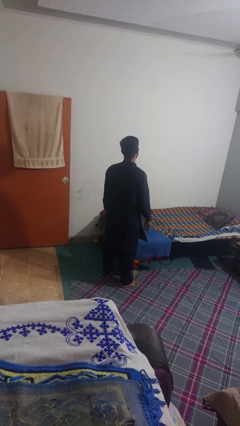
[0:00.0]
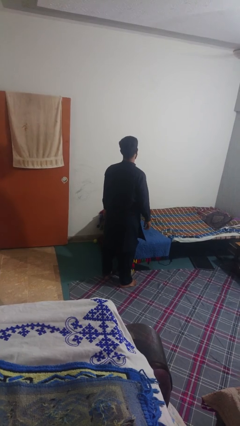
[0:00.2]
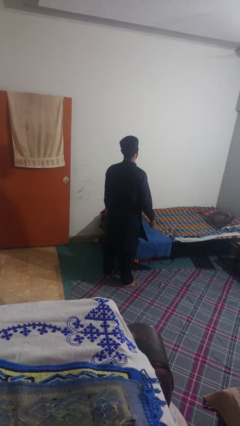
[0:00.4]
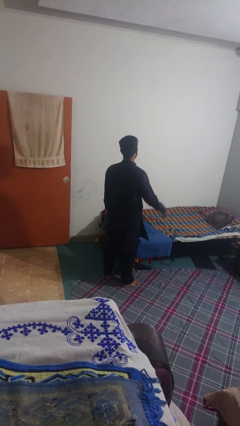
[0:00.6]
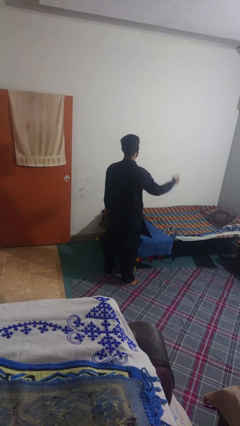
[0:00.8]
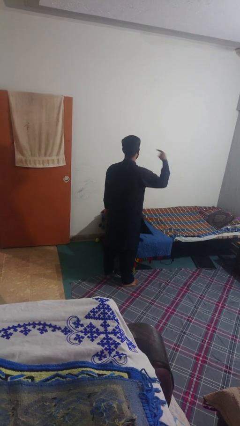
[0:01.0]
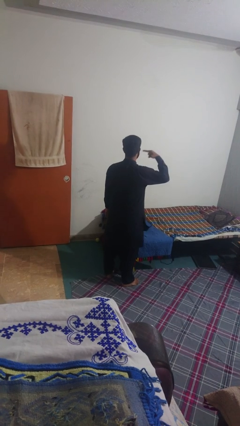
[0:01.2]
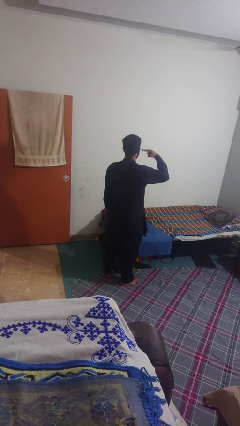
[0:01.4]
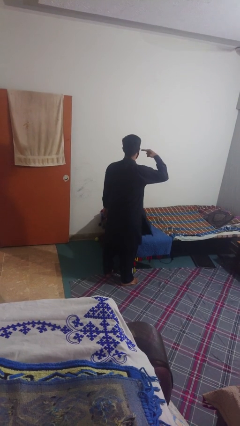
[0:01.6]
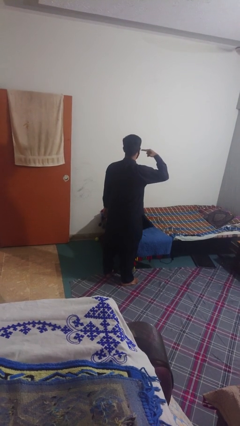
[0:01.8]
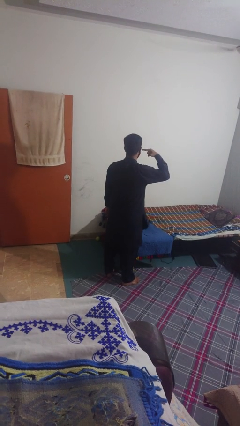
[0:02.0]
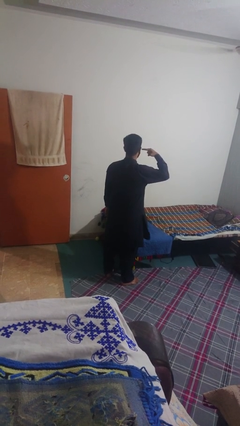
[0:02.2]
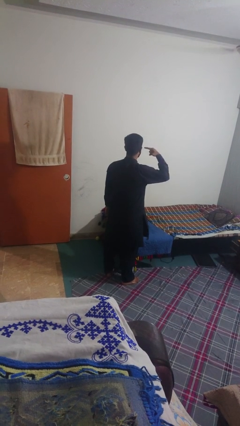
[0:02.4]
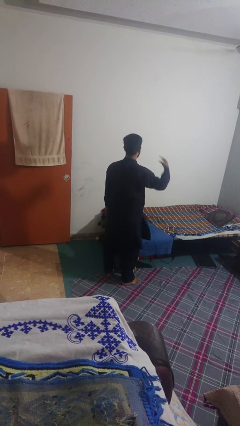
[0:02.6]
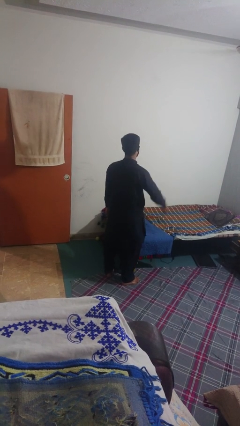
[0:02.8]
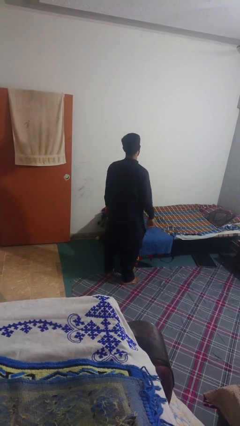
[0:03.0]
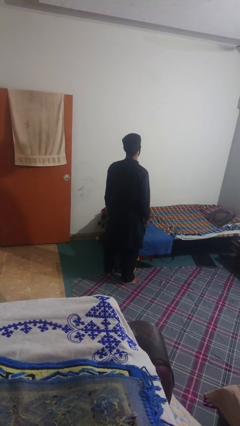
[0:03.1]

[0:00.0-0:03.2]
person gestures listen closely

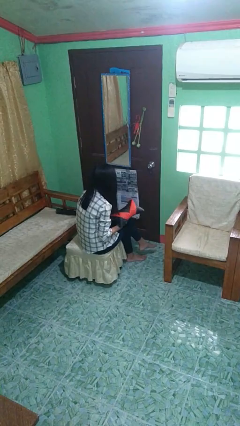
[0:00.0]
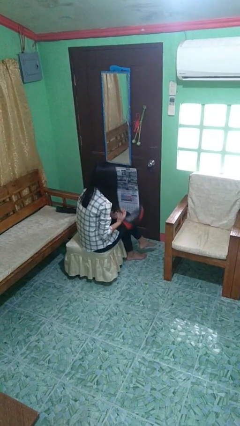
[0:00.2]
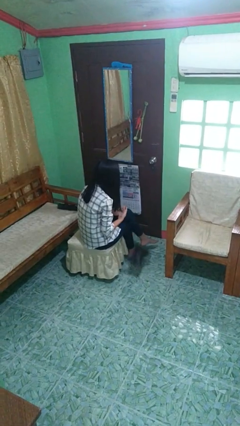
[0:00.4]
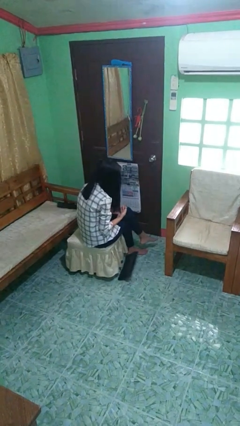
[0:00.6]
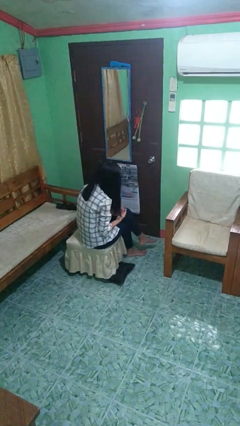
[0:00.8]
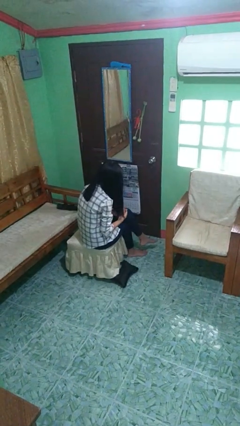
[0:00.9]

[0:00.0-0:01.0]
person drops object

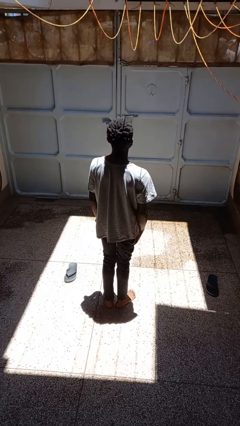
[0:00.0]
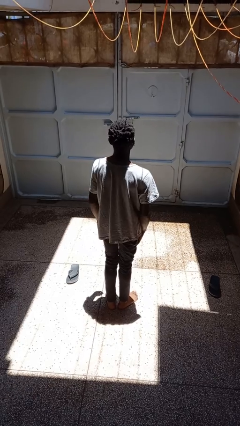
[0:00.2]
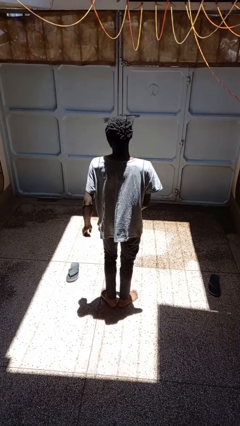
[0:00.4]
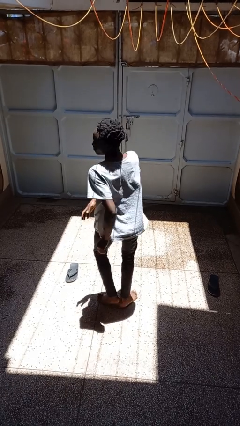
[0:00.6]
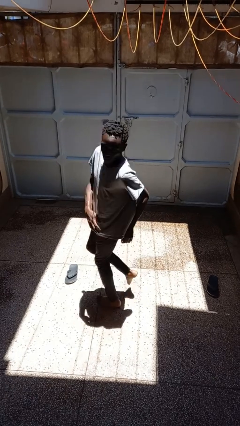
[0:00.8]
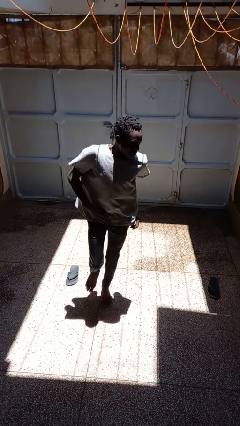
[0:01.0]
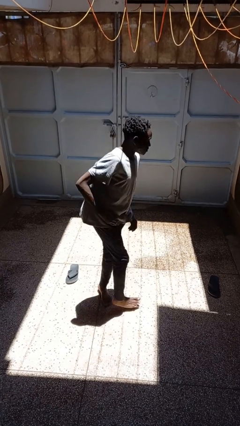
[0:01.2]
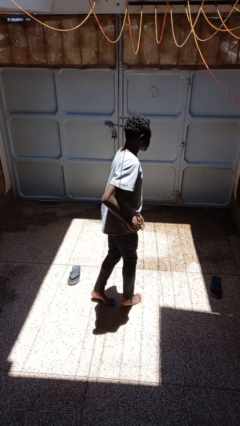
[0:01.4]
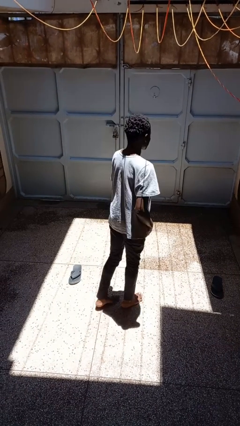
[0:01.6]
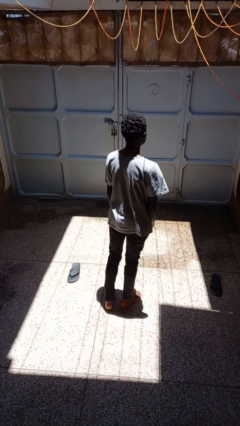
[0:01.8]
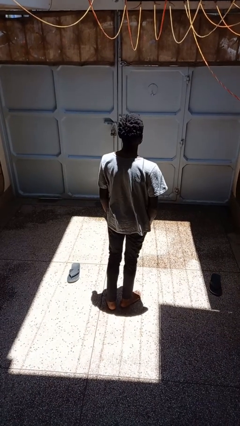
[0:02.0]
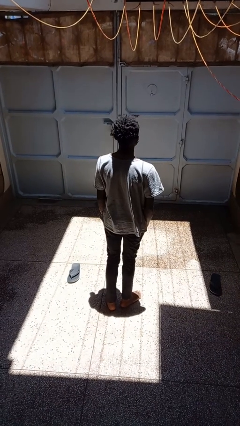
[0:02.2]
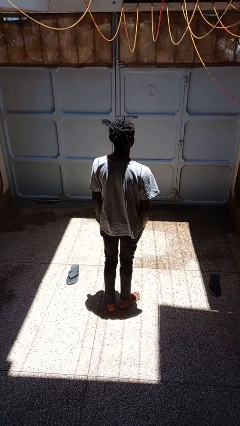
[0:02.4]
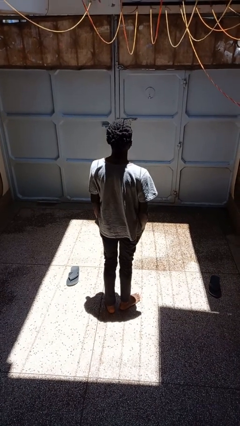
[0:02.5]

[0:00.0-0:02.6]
person twirls

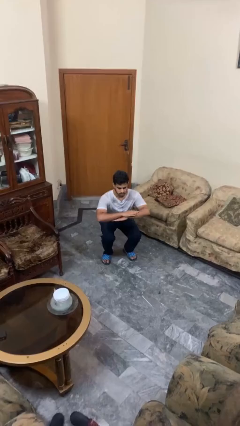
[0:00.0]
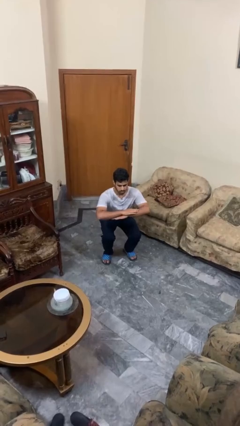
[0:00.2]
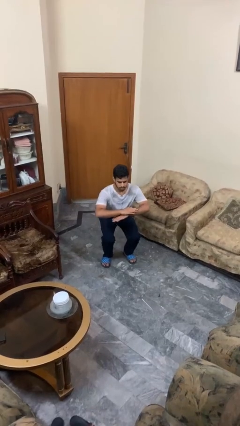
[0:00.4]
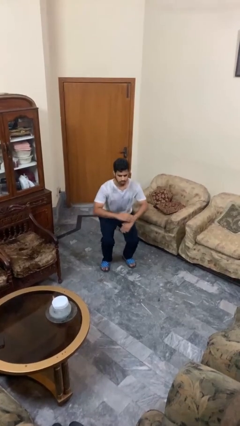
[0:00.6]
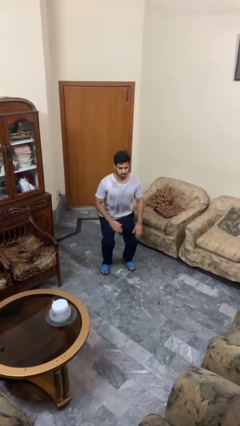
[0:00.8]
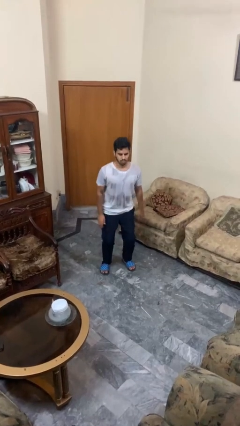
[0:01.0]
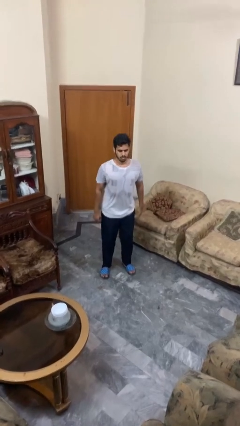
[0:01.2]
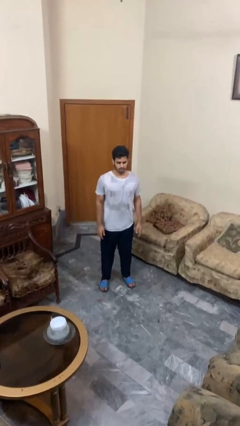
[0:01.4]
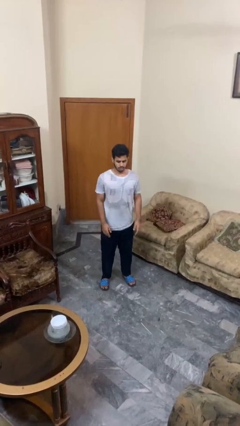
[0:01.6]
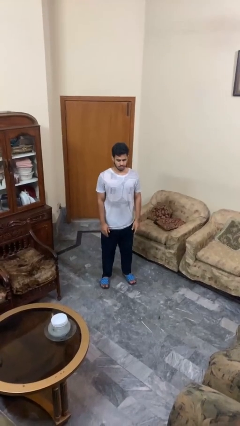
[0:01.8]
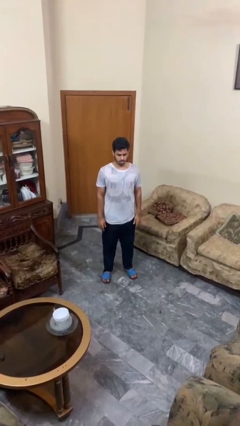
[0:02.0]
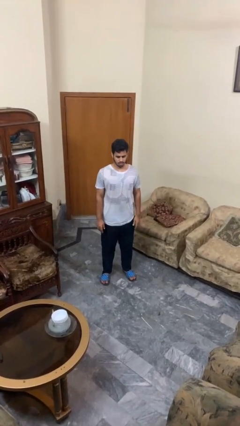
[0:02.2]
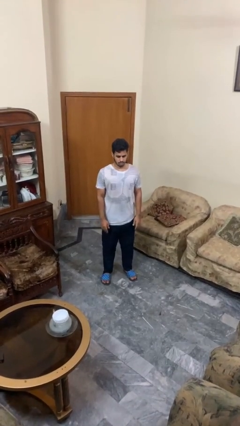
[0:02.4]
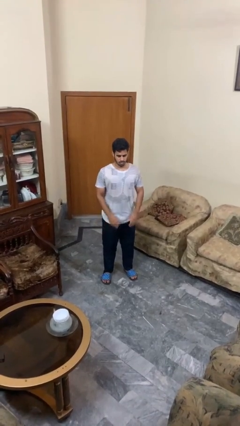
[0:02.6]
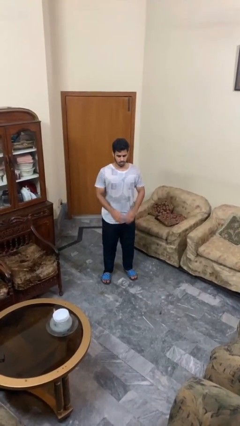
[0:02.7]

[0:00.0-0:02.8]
person stands up

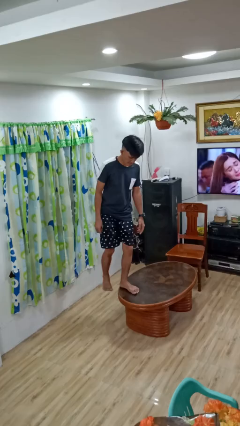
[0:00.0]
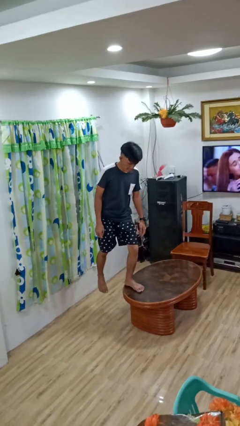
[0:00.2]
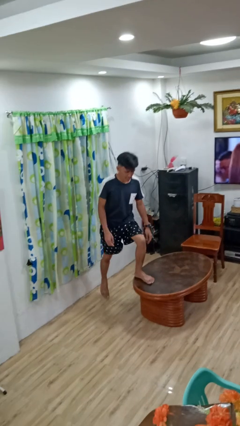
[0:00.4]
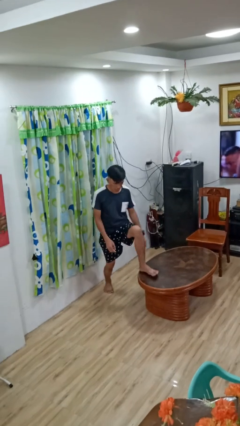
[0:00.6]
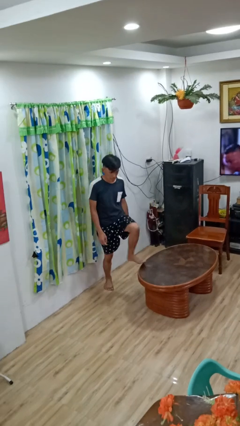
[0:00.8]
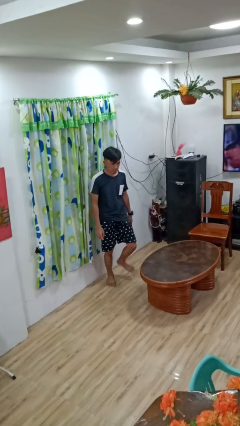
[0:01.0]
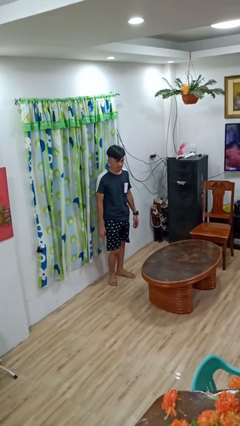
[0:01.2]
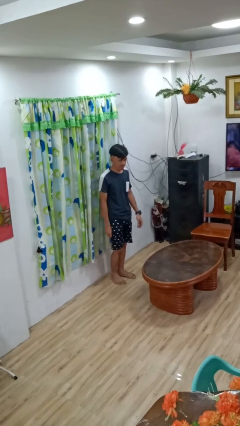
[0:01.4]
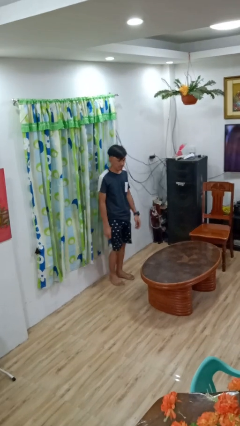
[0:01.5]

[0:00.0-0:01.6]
person climbs off table

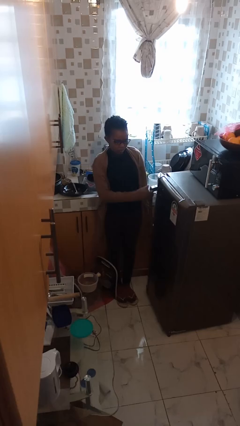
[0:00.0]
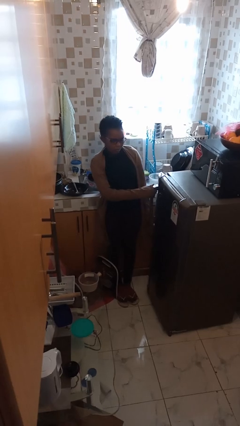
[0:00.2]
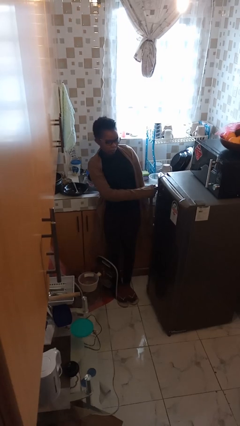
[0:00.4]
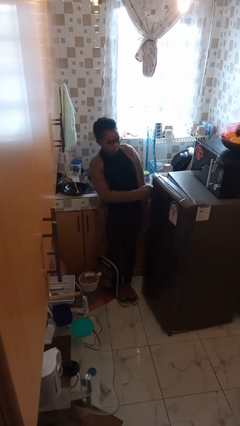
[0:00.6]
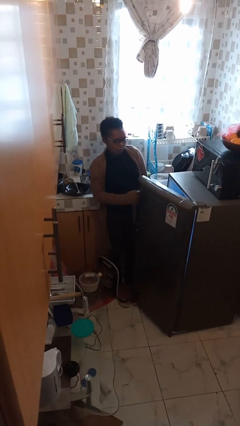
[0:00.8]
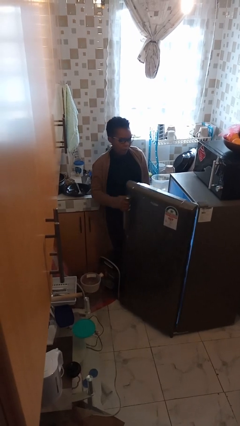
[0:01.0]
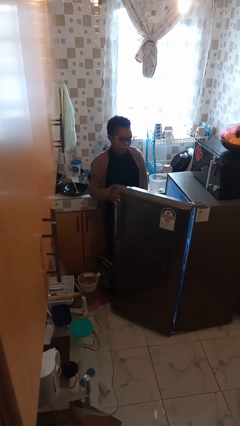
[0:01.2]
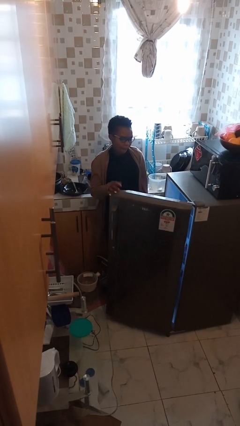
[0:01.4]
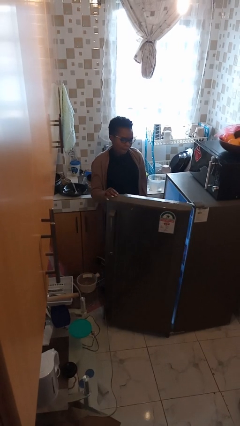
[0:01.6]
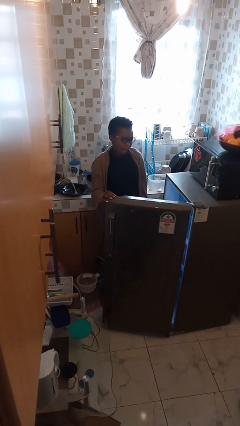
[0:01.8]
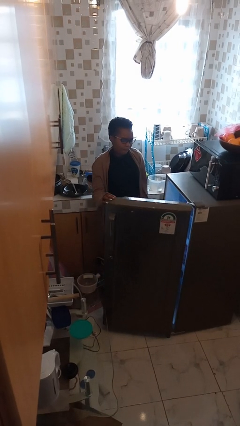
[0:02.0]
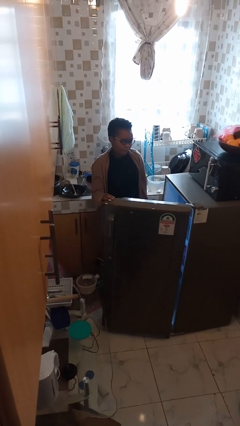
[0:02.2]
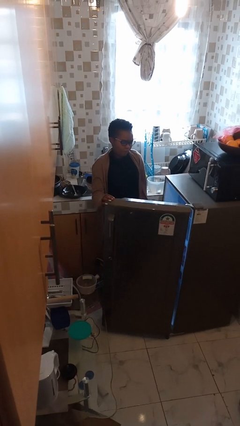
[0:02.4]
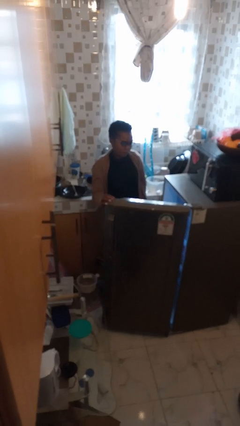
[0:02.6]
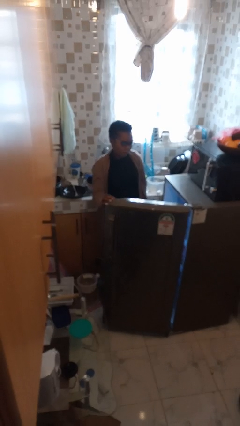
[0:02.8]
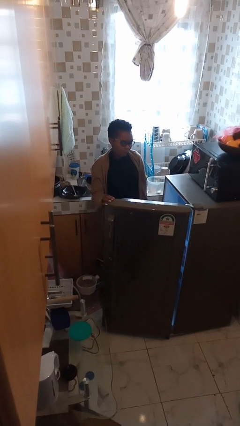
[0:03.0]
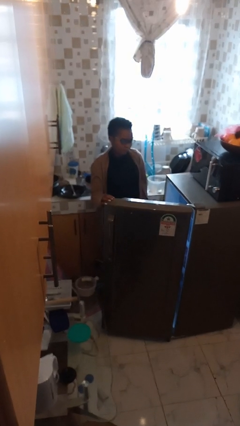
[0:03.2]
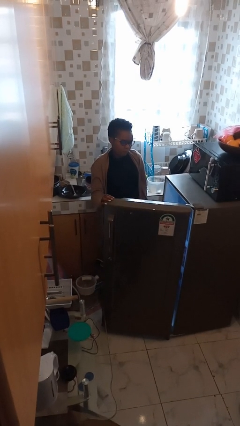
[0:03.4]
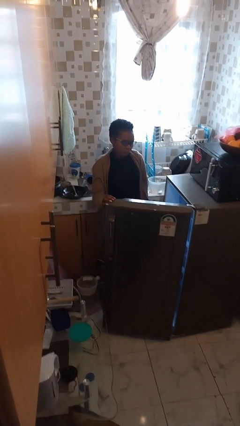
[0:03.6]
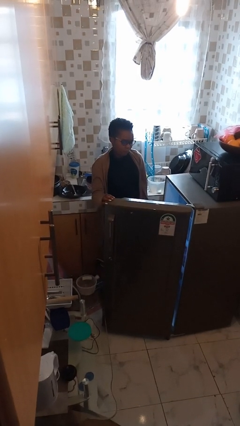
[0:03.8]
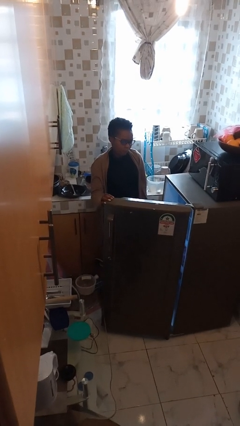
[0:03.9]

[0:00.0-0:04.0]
person opens refrigerator

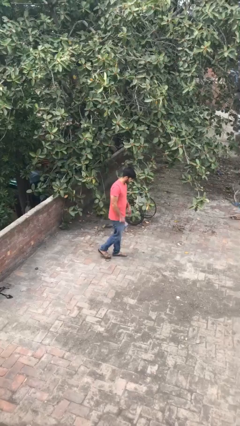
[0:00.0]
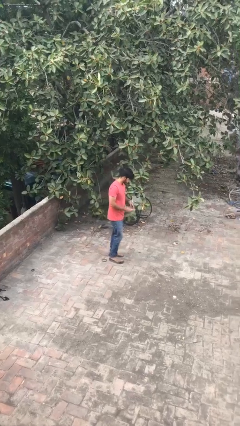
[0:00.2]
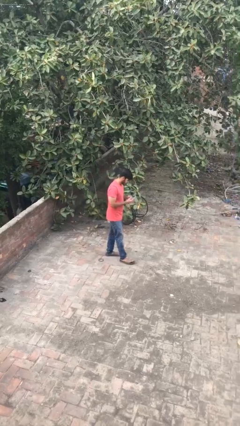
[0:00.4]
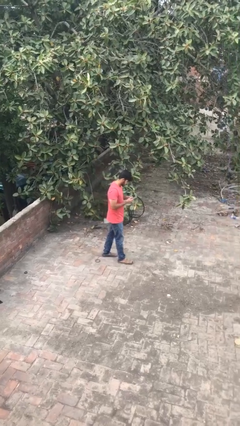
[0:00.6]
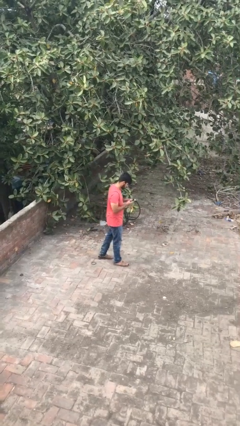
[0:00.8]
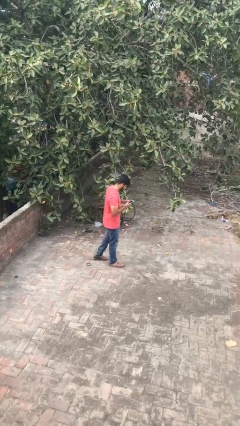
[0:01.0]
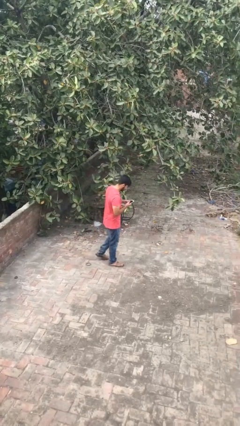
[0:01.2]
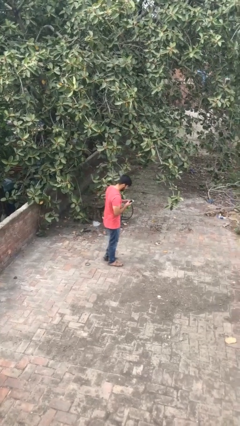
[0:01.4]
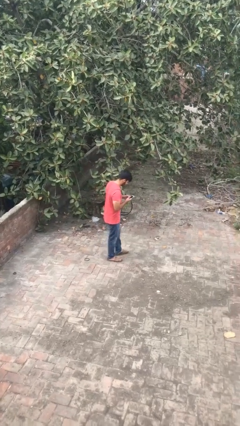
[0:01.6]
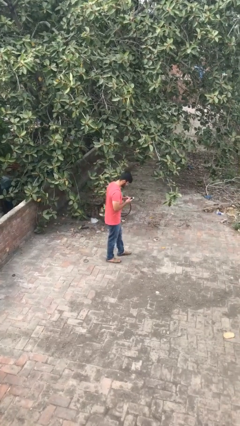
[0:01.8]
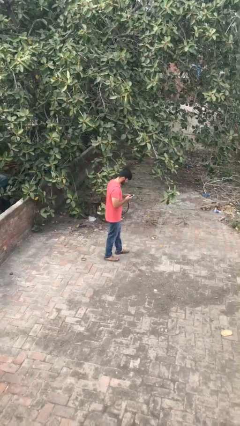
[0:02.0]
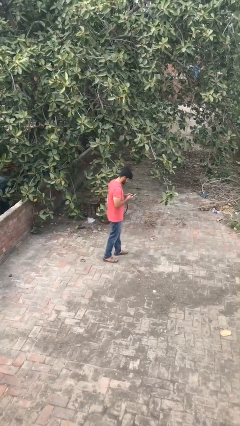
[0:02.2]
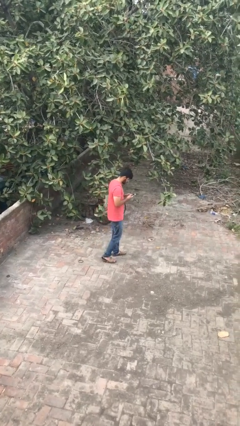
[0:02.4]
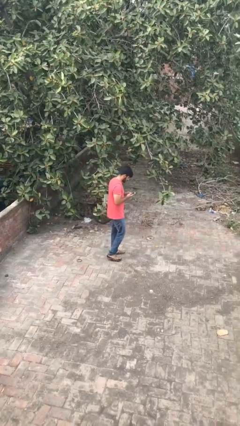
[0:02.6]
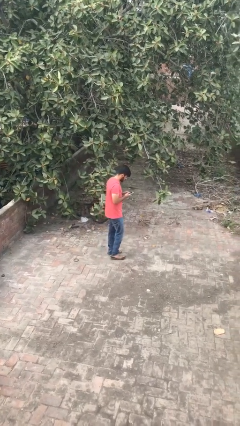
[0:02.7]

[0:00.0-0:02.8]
person texts on phone
